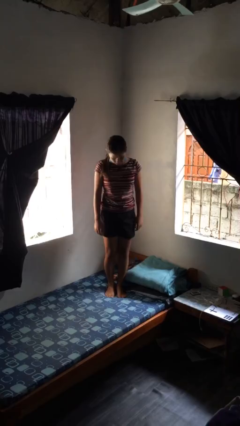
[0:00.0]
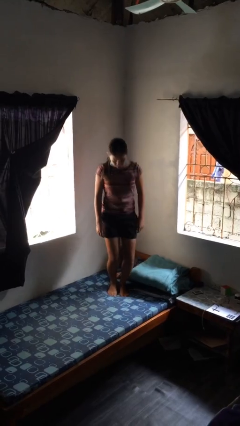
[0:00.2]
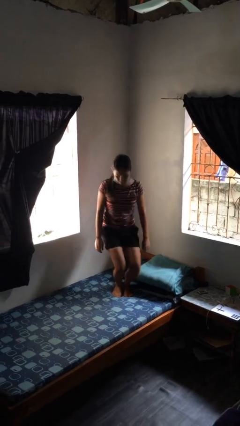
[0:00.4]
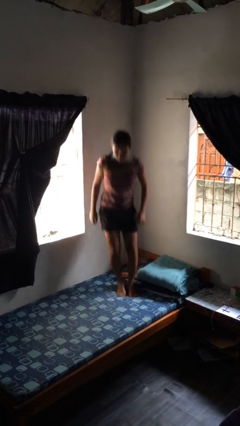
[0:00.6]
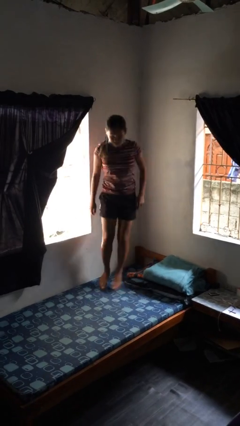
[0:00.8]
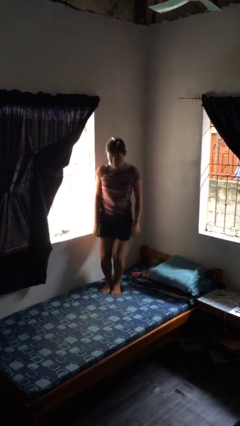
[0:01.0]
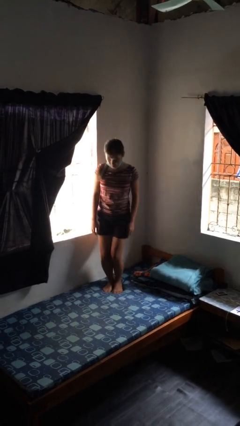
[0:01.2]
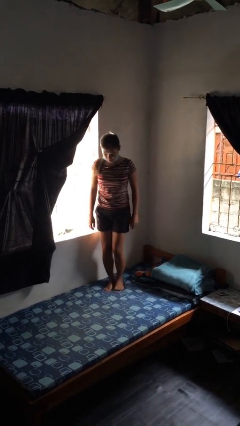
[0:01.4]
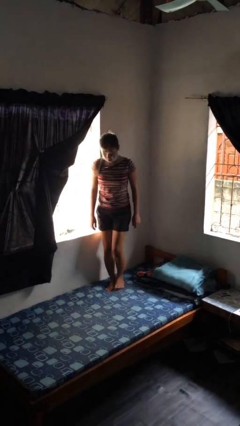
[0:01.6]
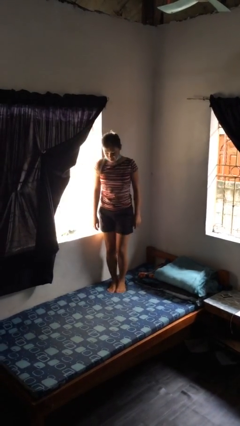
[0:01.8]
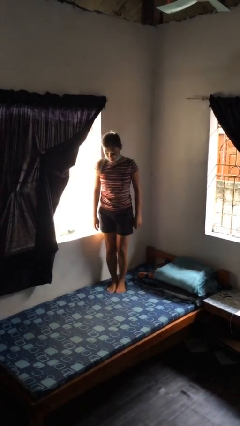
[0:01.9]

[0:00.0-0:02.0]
person jumps on bed

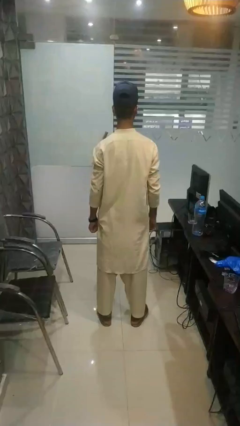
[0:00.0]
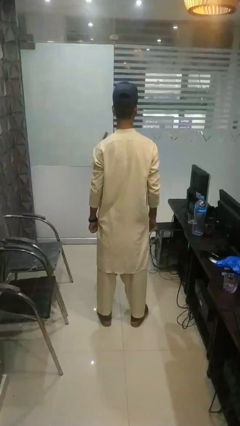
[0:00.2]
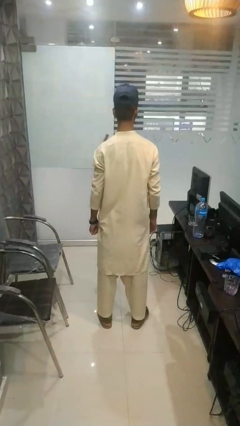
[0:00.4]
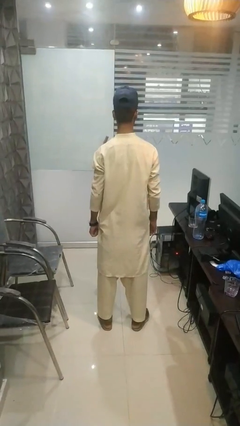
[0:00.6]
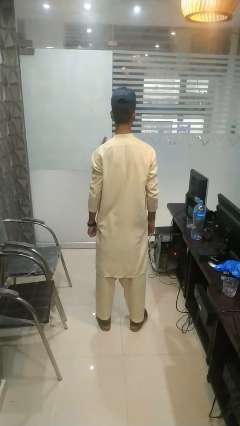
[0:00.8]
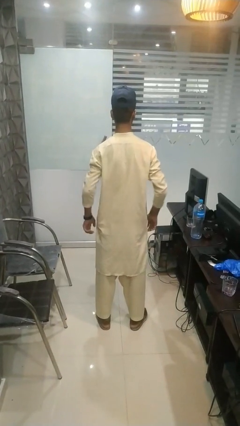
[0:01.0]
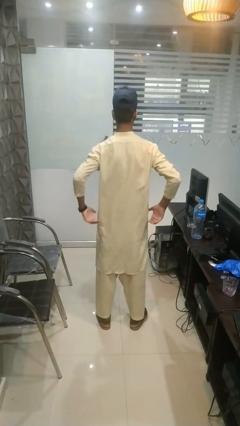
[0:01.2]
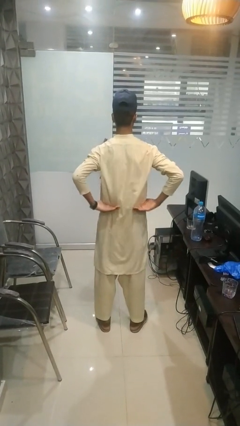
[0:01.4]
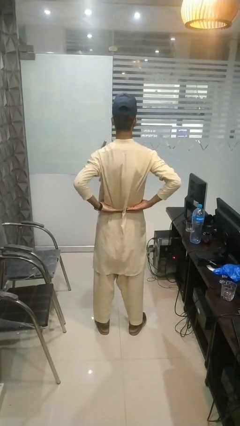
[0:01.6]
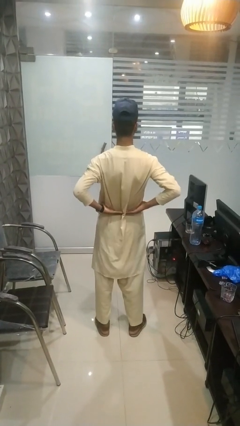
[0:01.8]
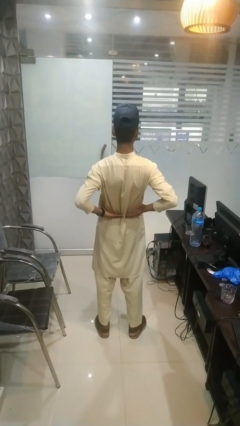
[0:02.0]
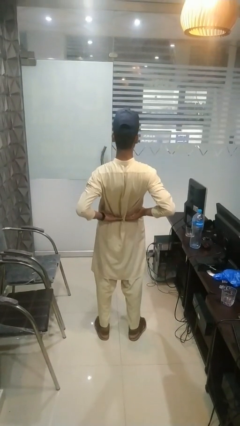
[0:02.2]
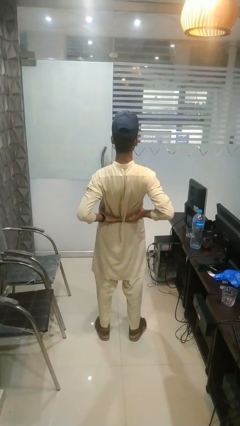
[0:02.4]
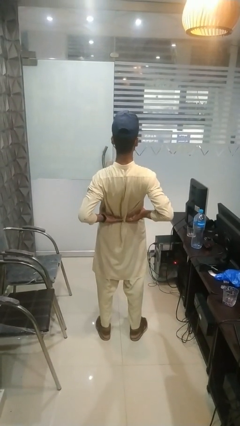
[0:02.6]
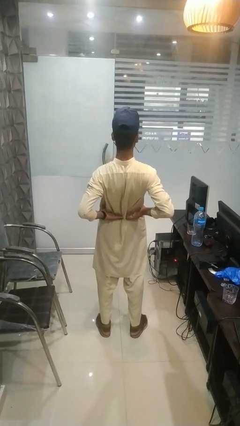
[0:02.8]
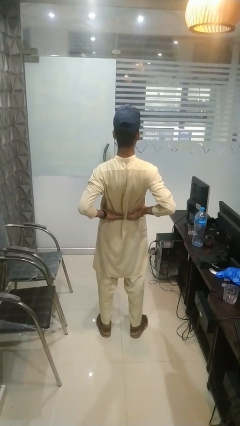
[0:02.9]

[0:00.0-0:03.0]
person stretches back

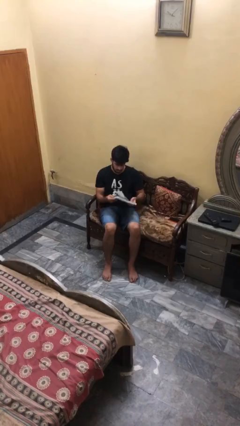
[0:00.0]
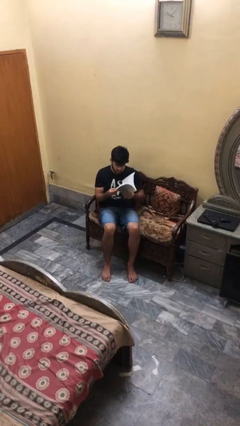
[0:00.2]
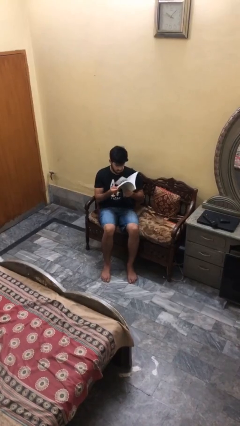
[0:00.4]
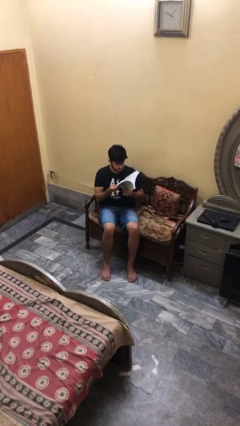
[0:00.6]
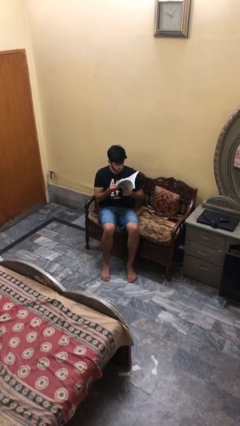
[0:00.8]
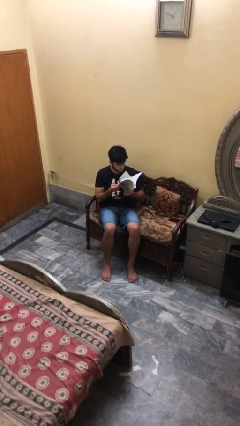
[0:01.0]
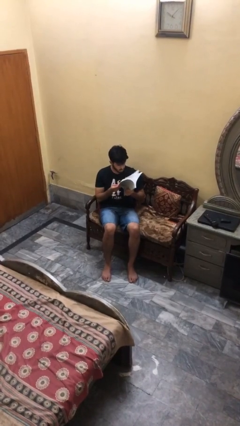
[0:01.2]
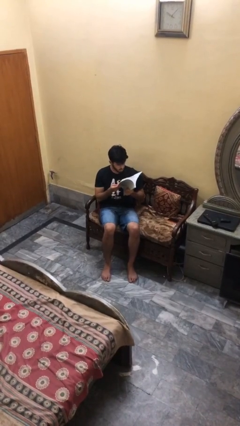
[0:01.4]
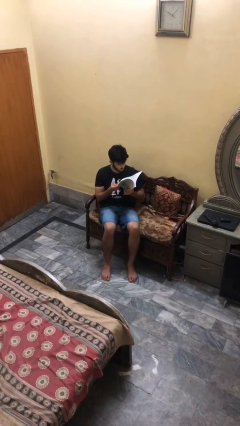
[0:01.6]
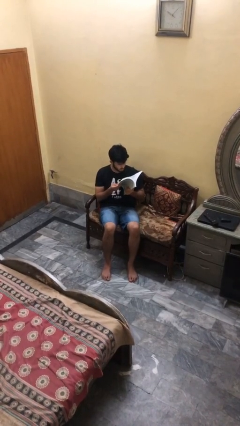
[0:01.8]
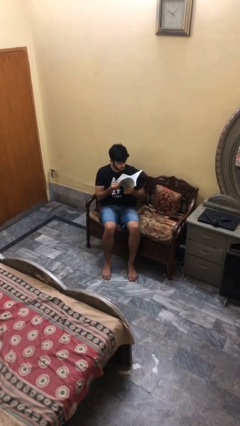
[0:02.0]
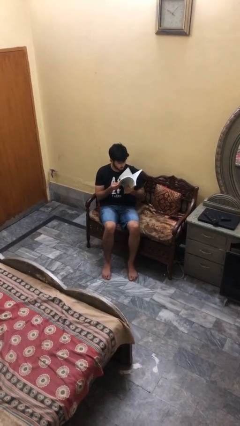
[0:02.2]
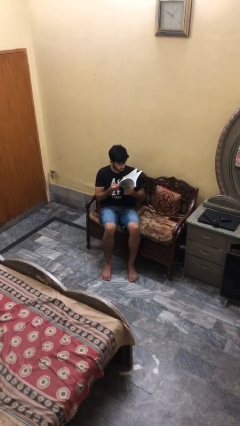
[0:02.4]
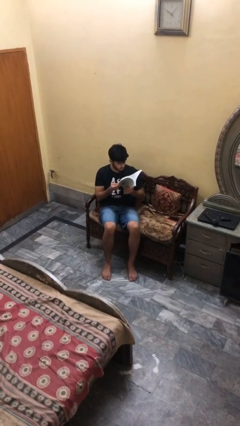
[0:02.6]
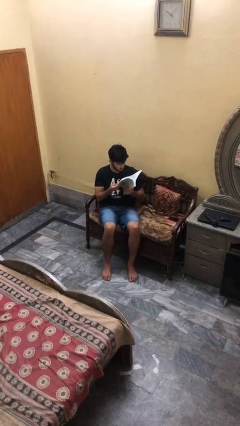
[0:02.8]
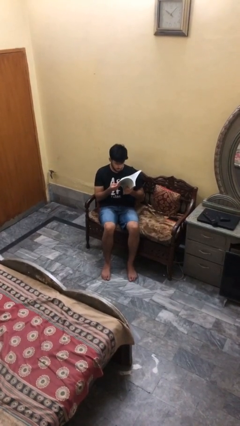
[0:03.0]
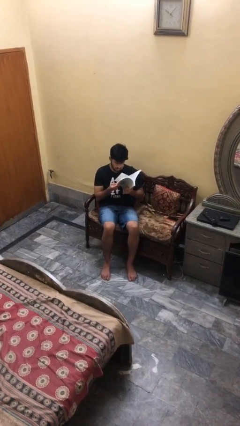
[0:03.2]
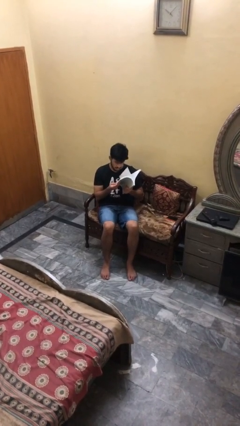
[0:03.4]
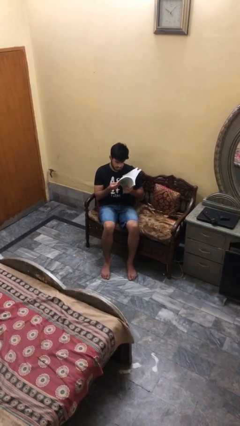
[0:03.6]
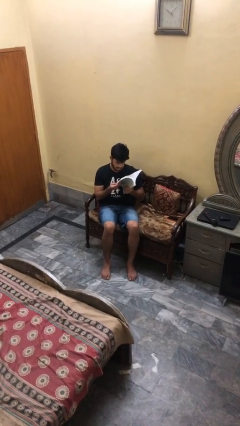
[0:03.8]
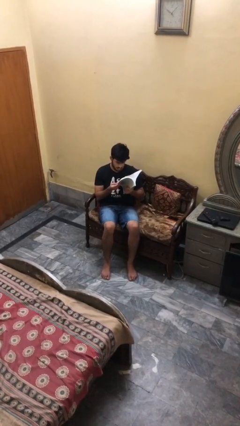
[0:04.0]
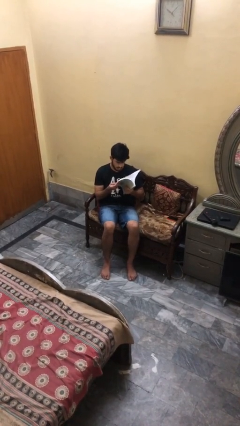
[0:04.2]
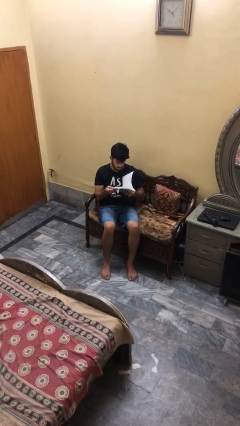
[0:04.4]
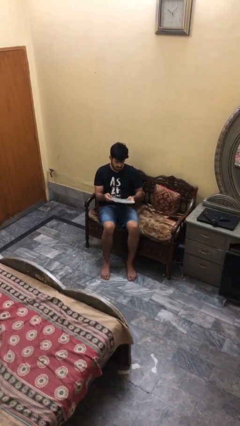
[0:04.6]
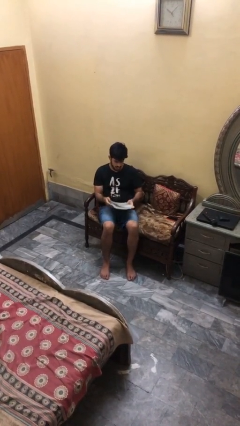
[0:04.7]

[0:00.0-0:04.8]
person reads book

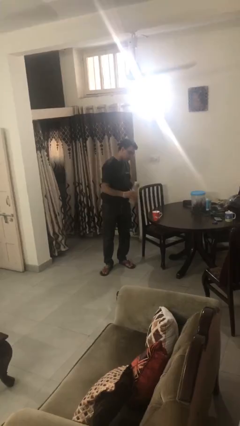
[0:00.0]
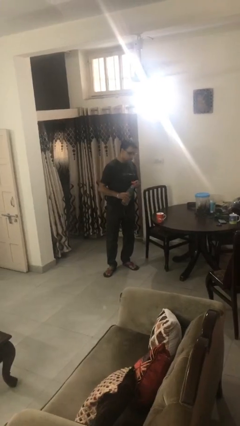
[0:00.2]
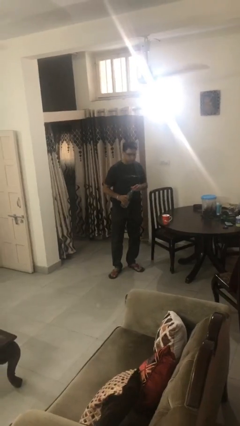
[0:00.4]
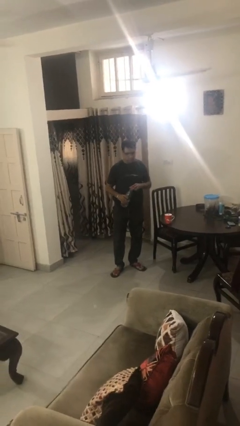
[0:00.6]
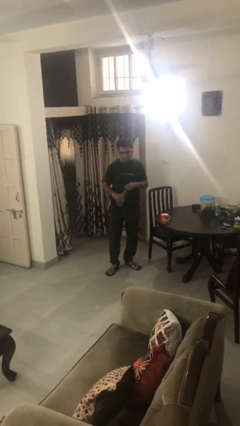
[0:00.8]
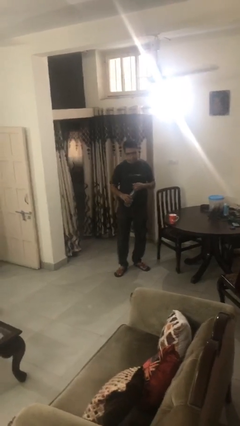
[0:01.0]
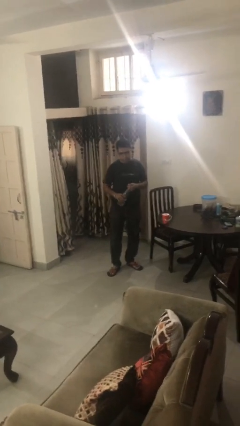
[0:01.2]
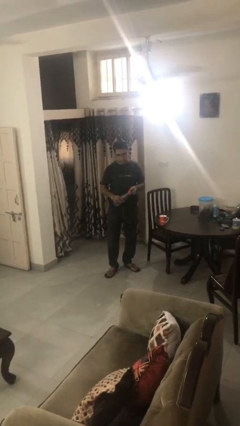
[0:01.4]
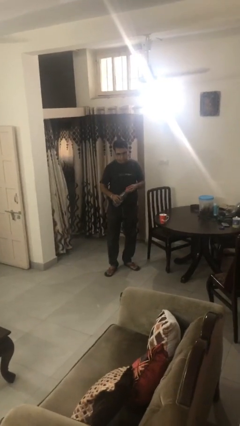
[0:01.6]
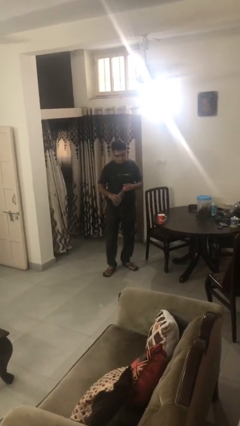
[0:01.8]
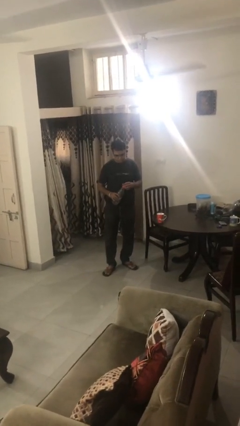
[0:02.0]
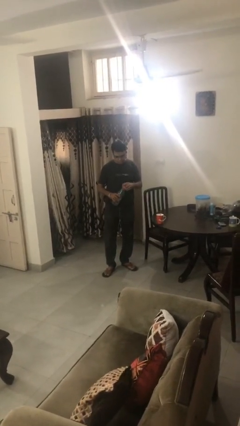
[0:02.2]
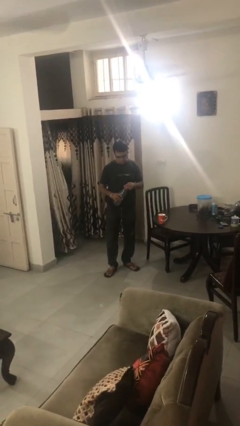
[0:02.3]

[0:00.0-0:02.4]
person screws lid to bottle

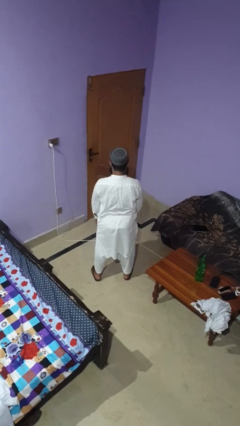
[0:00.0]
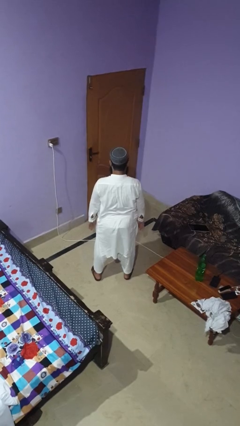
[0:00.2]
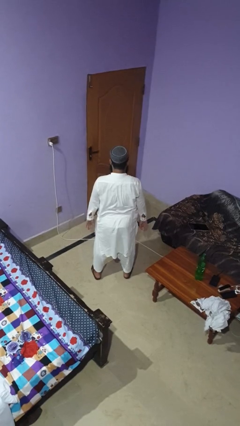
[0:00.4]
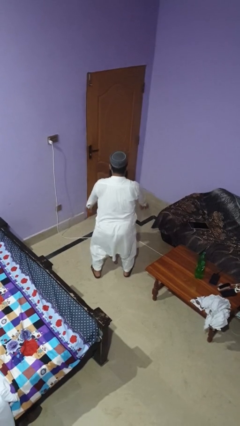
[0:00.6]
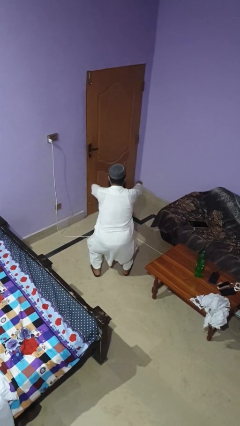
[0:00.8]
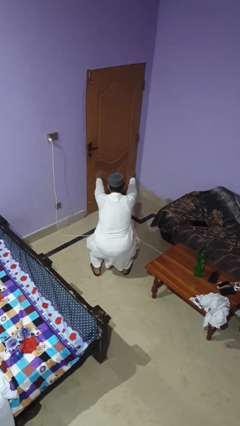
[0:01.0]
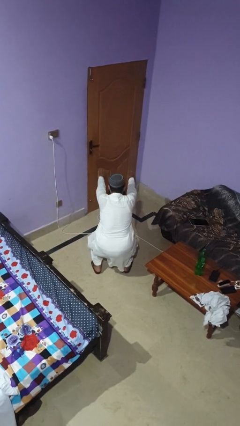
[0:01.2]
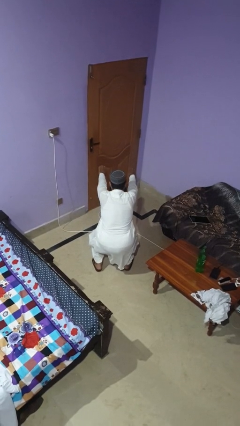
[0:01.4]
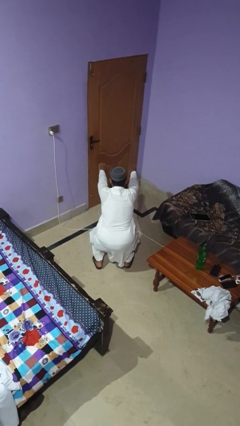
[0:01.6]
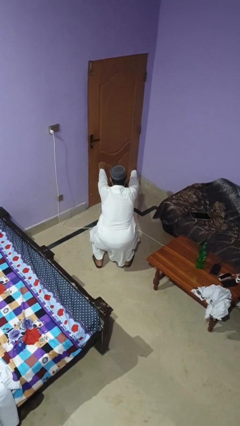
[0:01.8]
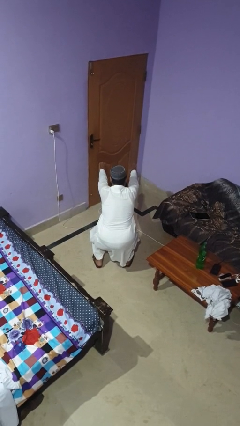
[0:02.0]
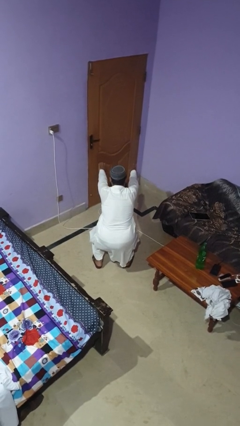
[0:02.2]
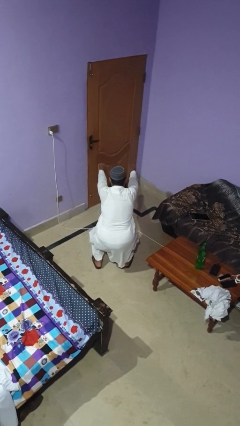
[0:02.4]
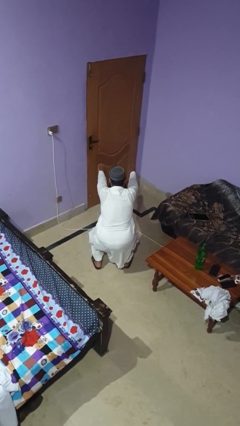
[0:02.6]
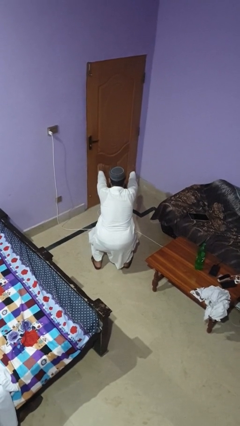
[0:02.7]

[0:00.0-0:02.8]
person squats

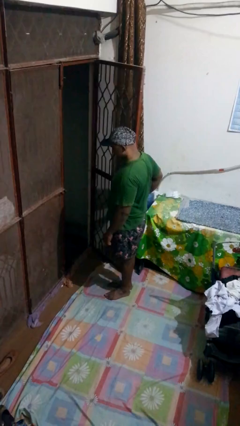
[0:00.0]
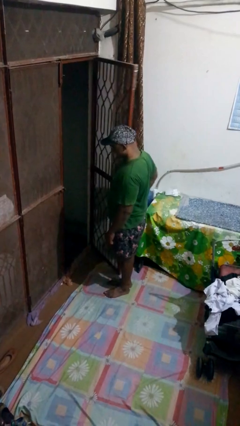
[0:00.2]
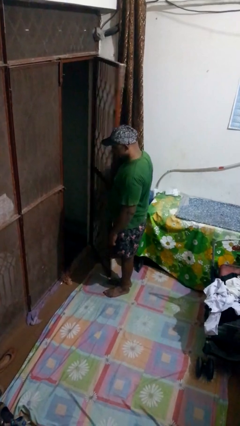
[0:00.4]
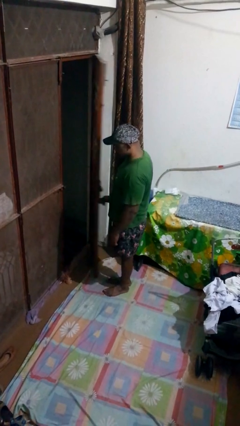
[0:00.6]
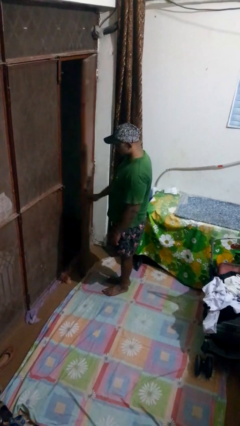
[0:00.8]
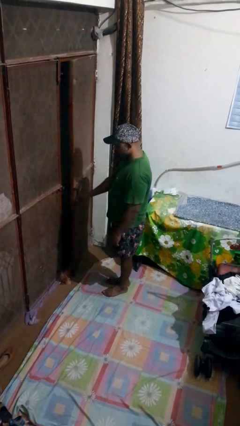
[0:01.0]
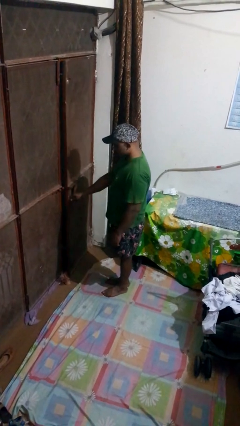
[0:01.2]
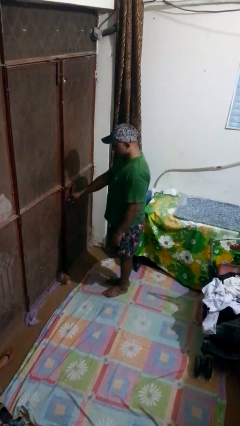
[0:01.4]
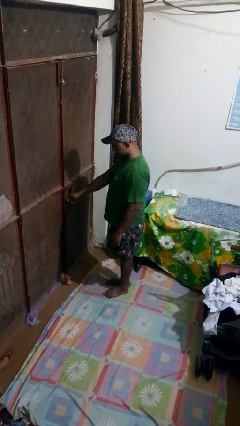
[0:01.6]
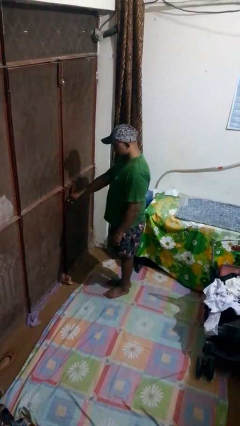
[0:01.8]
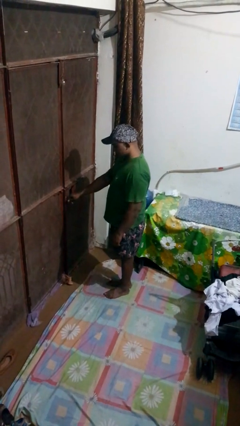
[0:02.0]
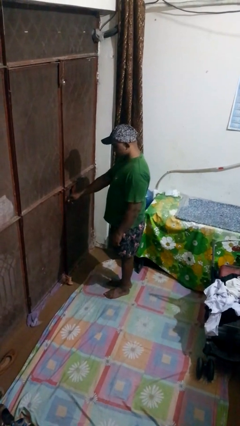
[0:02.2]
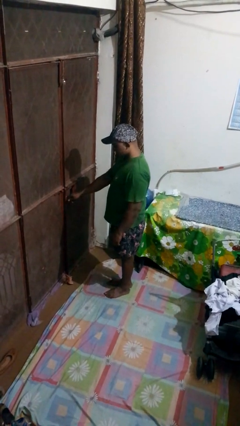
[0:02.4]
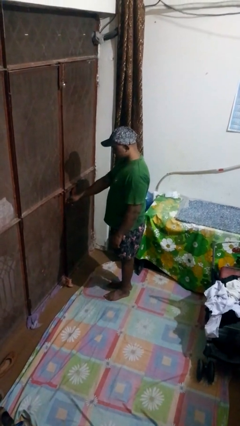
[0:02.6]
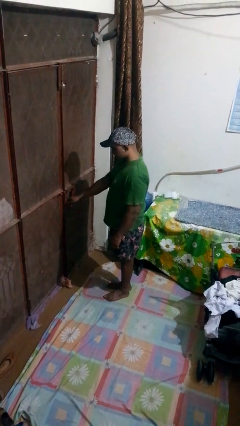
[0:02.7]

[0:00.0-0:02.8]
person closes gate
